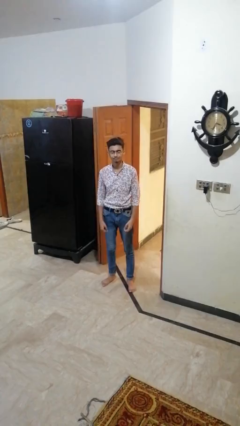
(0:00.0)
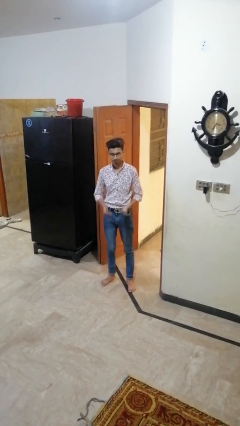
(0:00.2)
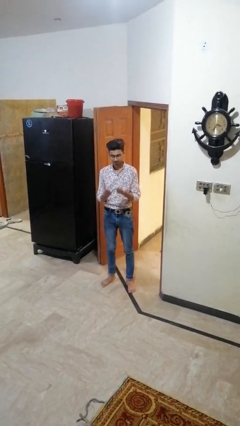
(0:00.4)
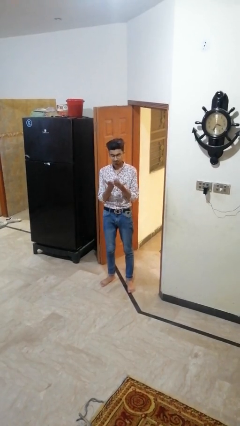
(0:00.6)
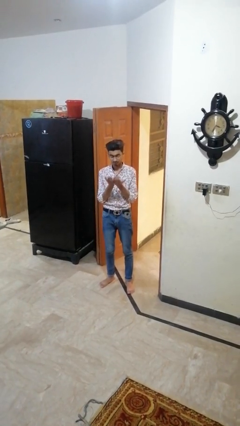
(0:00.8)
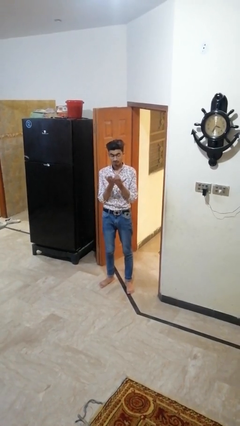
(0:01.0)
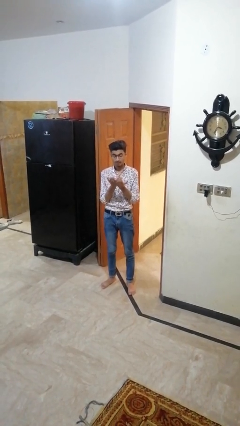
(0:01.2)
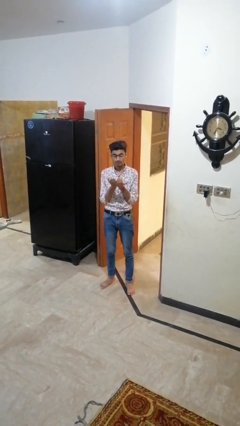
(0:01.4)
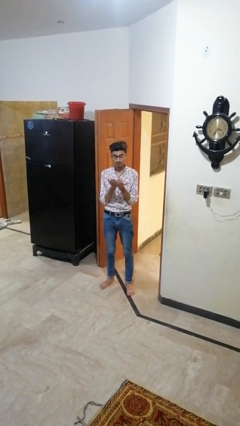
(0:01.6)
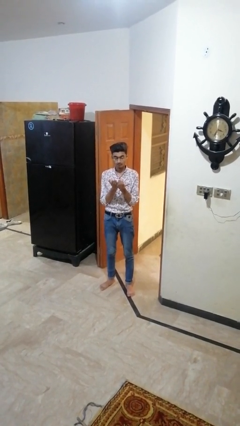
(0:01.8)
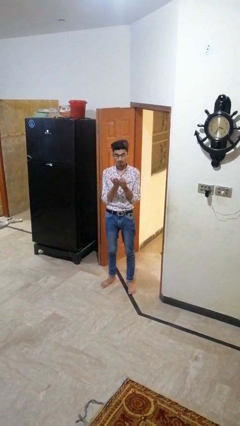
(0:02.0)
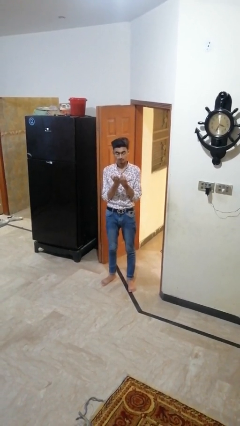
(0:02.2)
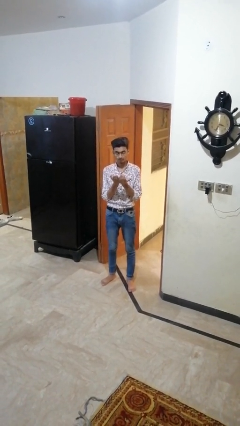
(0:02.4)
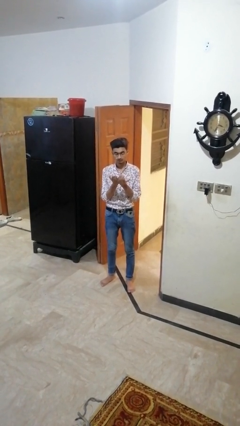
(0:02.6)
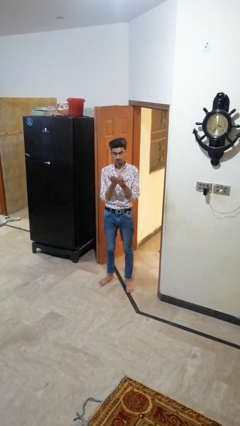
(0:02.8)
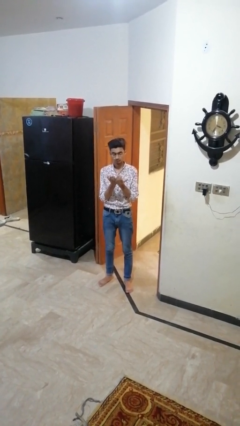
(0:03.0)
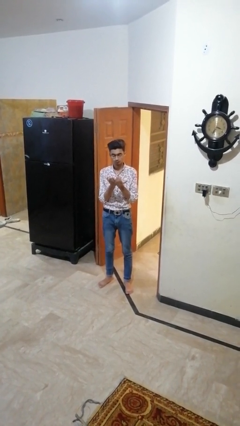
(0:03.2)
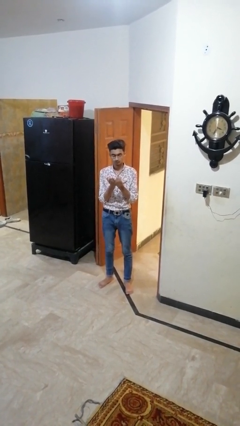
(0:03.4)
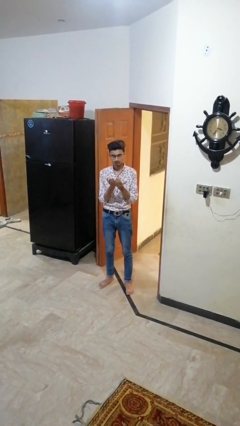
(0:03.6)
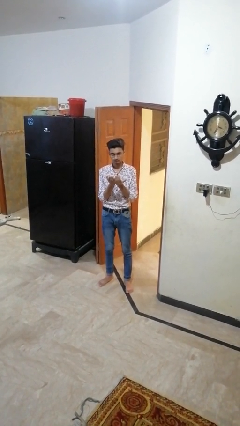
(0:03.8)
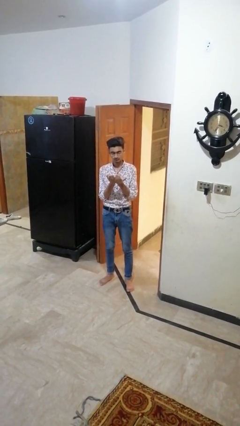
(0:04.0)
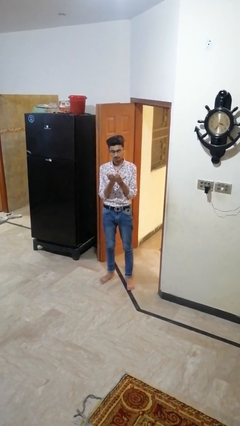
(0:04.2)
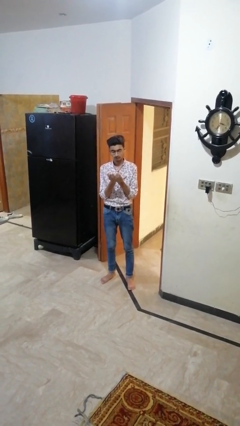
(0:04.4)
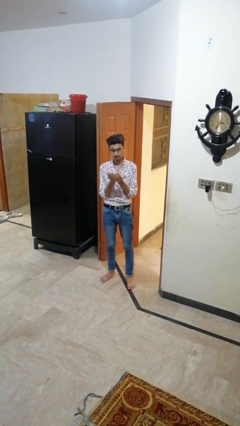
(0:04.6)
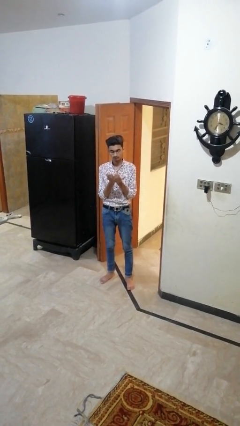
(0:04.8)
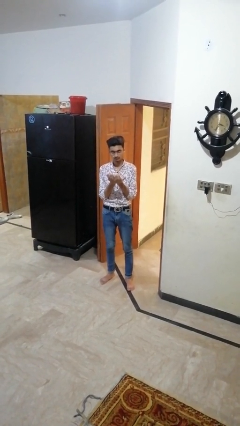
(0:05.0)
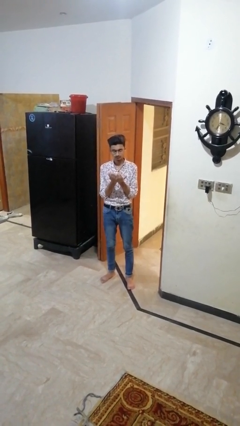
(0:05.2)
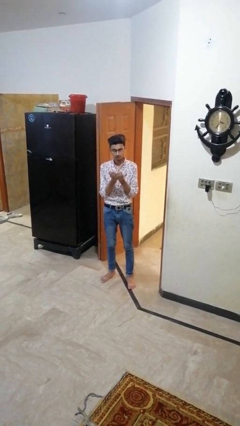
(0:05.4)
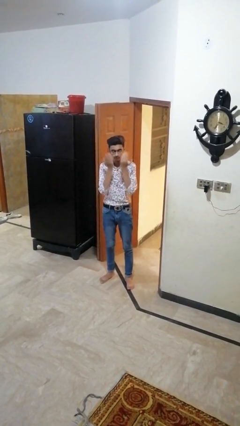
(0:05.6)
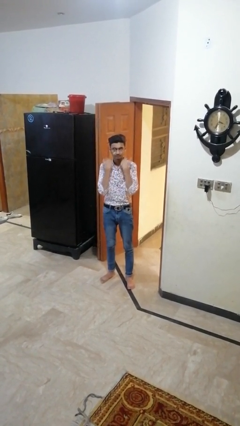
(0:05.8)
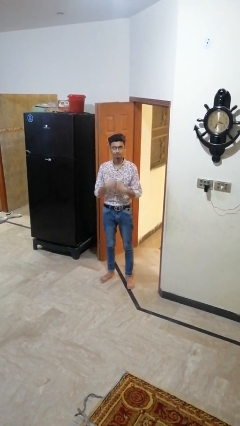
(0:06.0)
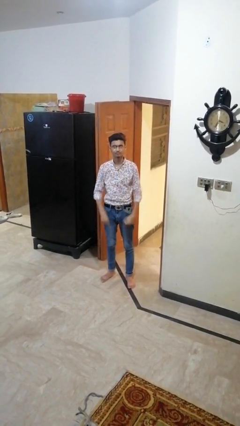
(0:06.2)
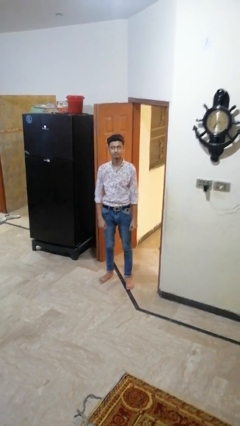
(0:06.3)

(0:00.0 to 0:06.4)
person prays

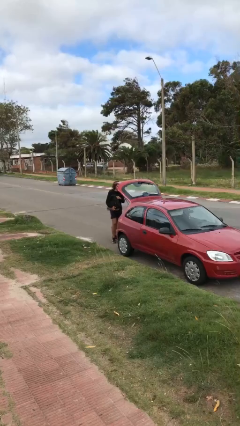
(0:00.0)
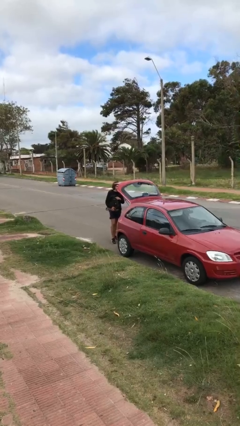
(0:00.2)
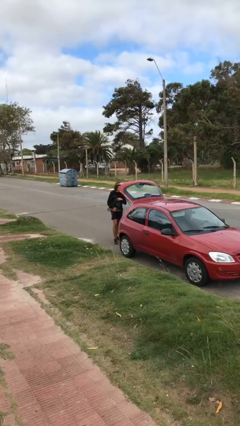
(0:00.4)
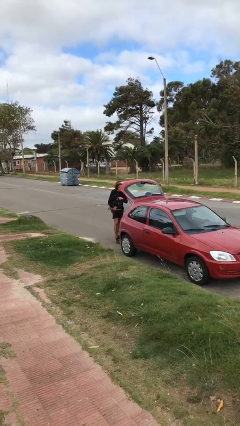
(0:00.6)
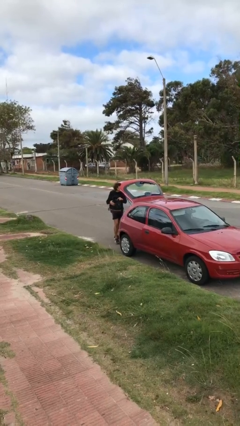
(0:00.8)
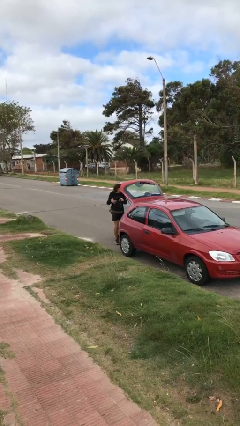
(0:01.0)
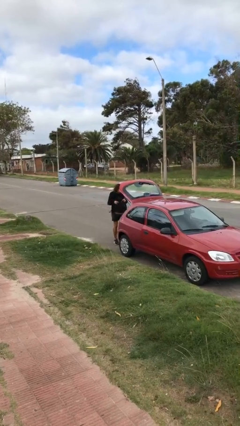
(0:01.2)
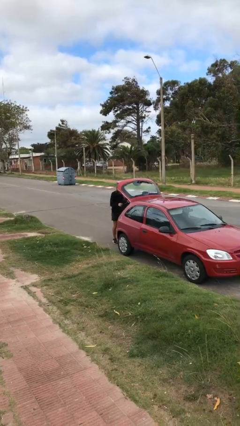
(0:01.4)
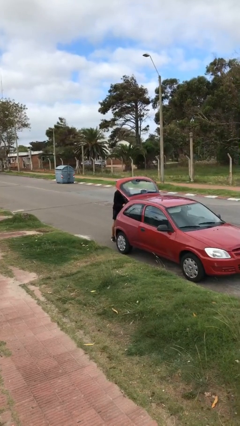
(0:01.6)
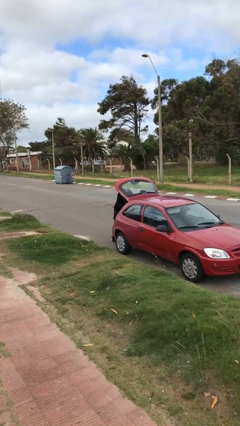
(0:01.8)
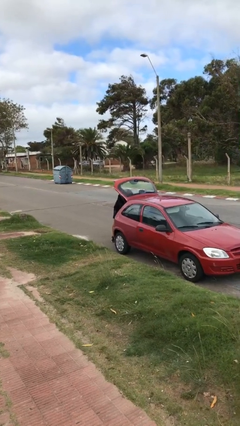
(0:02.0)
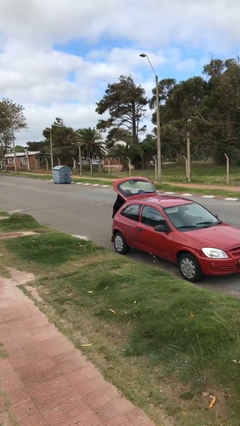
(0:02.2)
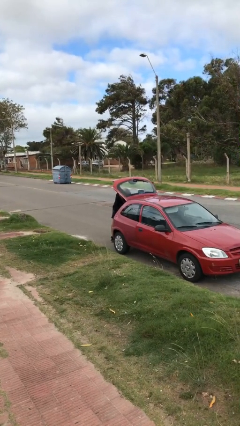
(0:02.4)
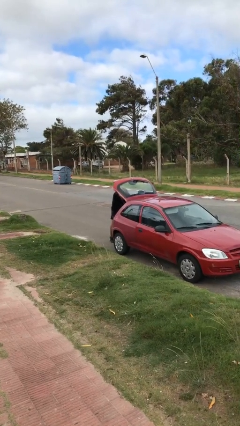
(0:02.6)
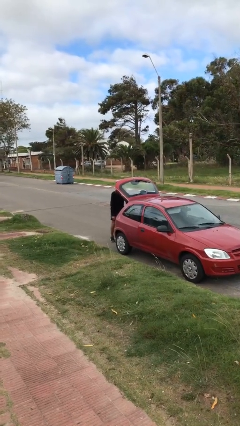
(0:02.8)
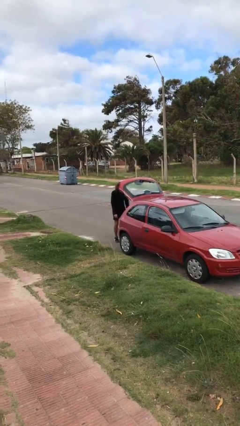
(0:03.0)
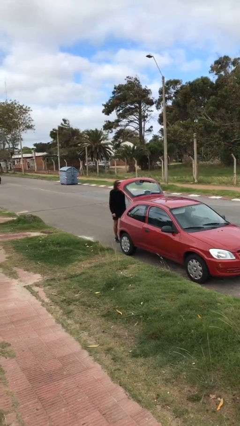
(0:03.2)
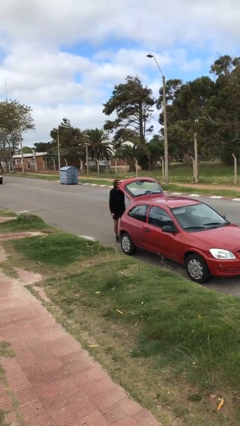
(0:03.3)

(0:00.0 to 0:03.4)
person loads car

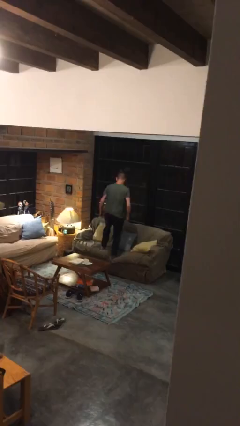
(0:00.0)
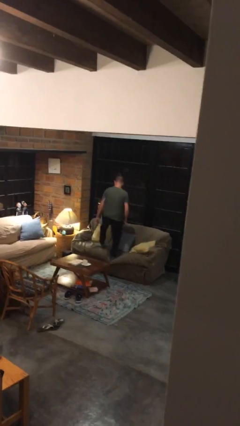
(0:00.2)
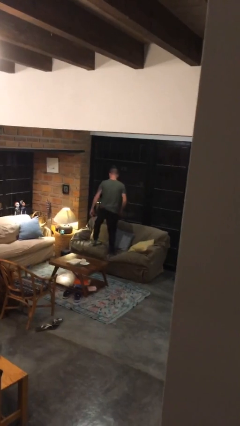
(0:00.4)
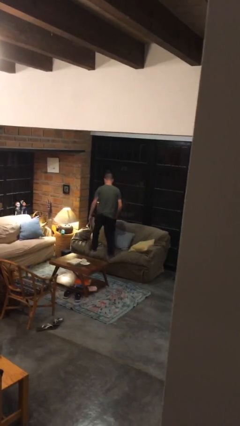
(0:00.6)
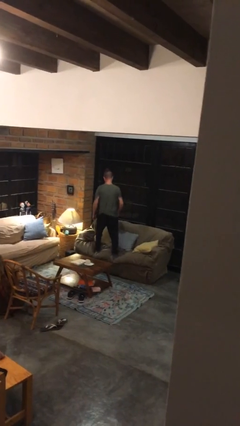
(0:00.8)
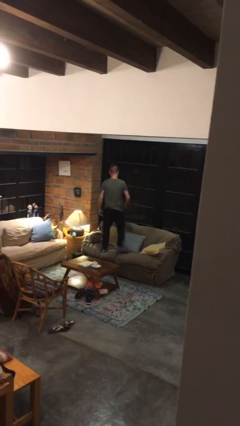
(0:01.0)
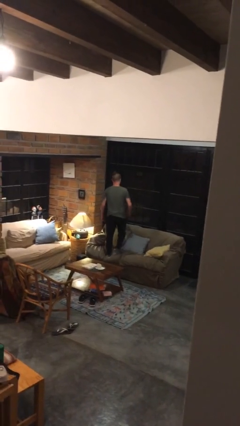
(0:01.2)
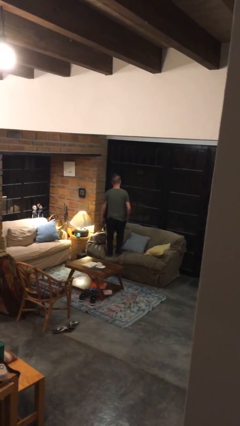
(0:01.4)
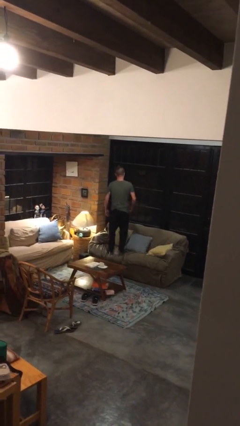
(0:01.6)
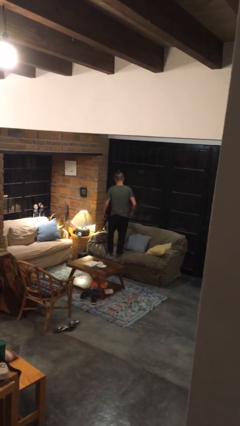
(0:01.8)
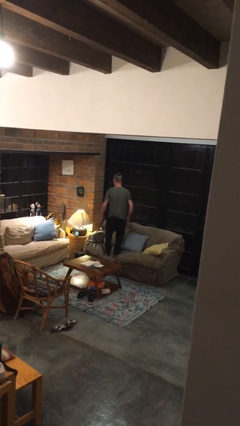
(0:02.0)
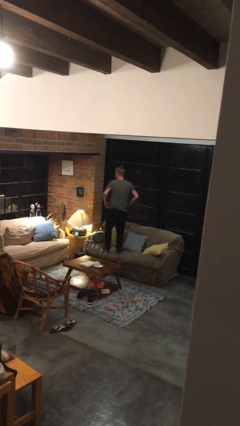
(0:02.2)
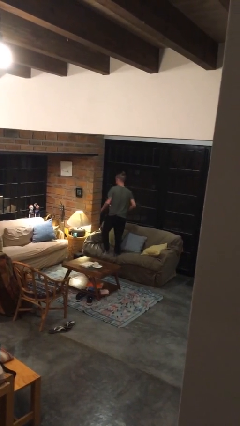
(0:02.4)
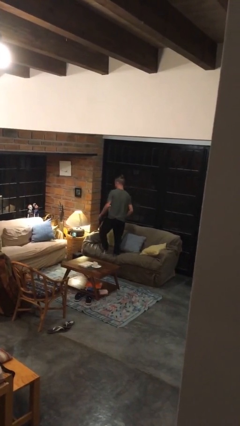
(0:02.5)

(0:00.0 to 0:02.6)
person jumps on couch

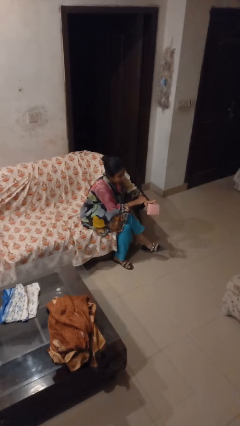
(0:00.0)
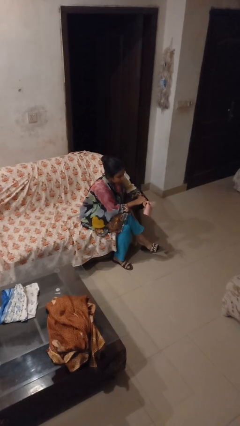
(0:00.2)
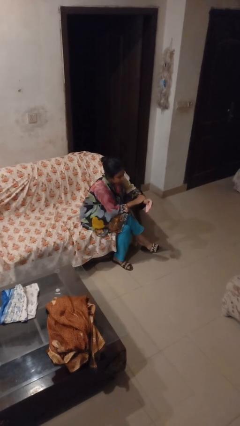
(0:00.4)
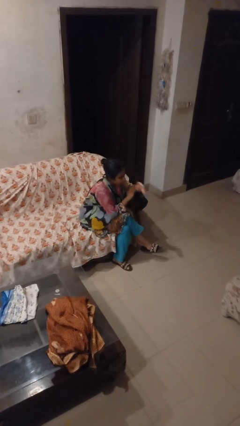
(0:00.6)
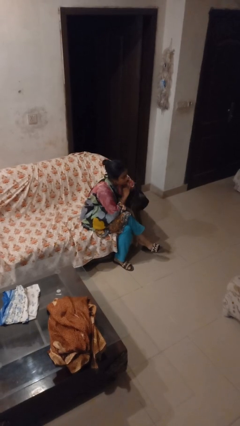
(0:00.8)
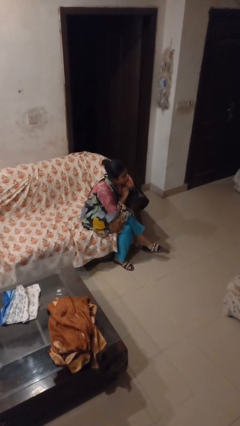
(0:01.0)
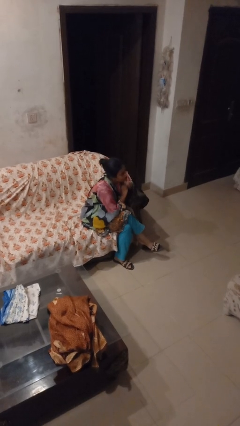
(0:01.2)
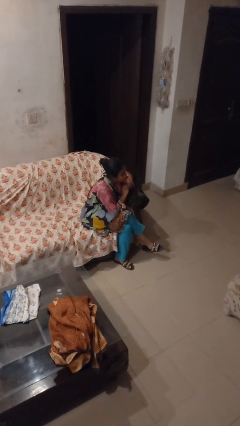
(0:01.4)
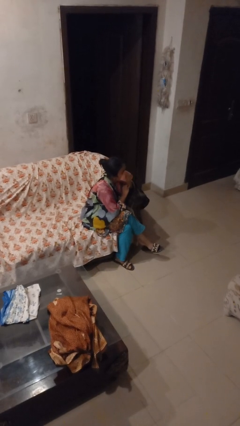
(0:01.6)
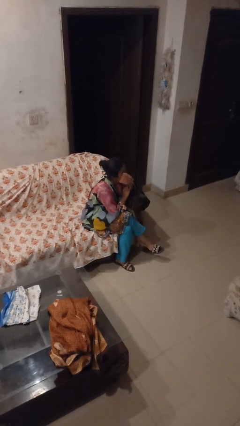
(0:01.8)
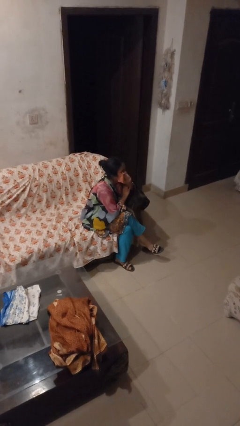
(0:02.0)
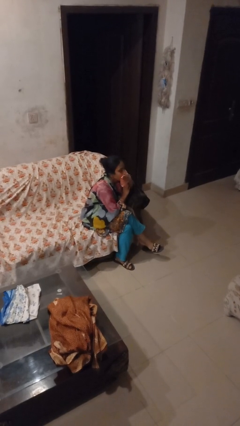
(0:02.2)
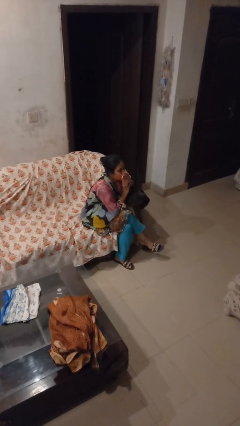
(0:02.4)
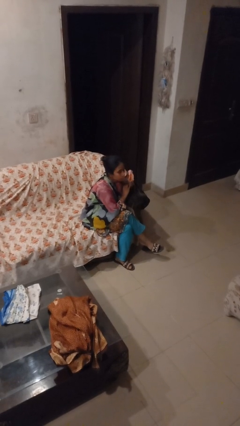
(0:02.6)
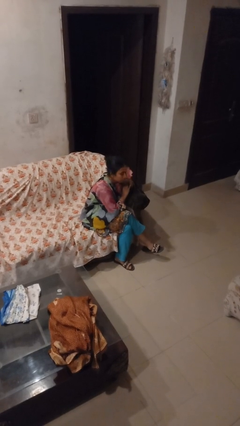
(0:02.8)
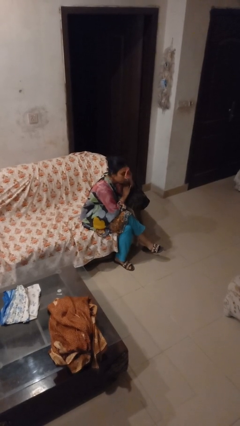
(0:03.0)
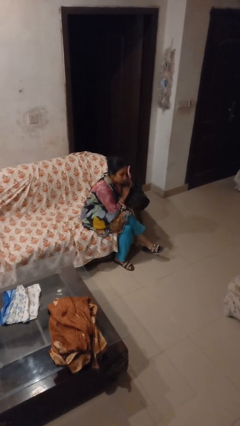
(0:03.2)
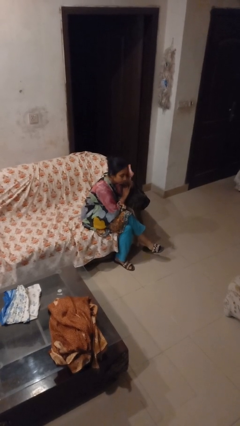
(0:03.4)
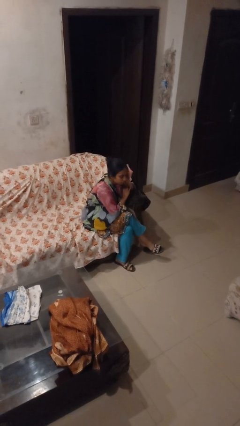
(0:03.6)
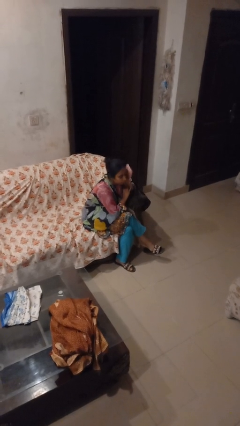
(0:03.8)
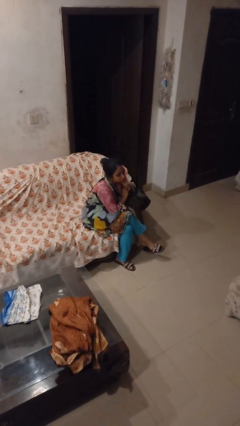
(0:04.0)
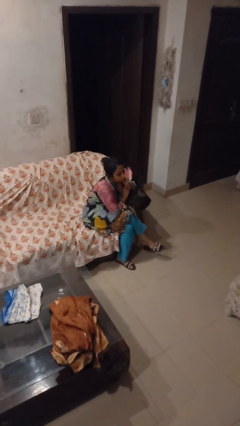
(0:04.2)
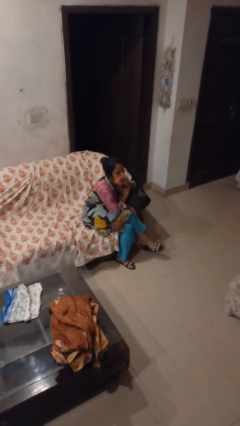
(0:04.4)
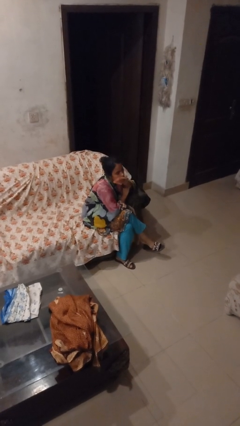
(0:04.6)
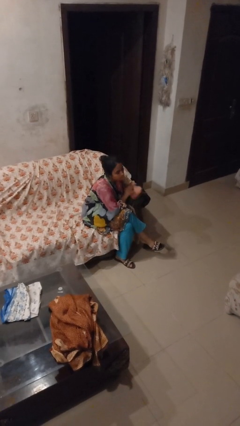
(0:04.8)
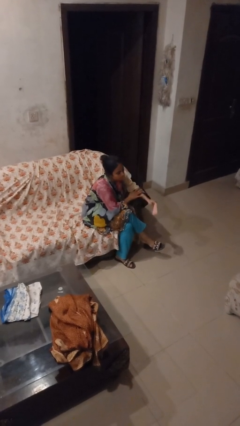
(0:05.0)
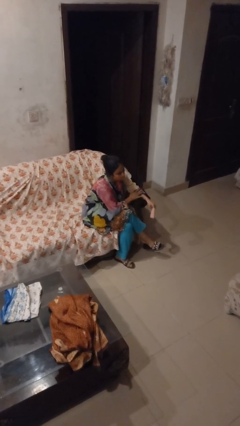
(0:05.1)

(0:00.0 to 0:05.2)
person wipes mouth with napkin

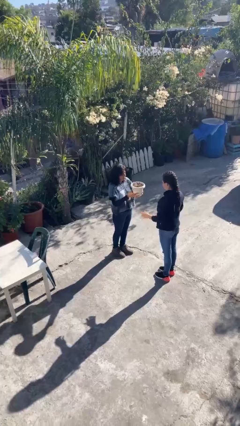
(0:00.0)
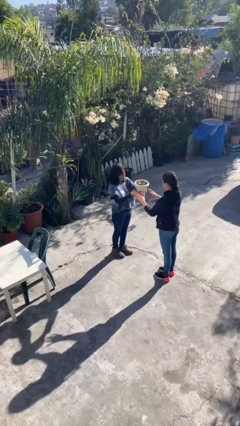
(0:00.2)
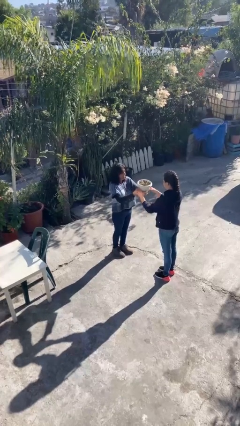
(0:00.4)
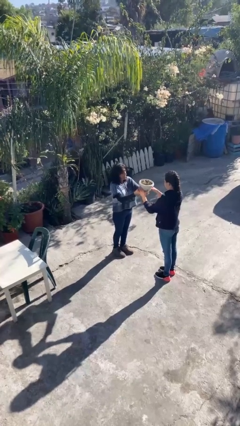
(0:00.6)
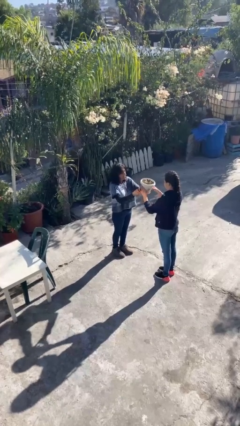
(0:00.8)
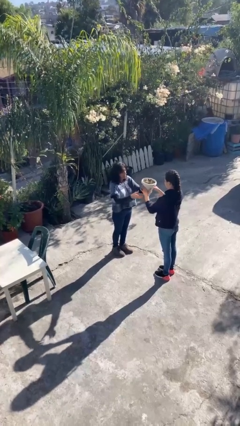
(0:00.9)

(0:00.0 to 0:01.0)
person transfers object to person
